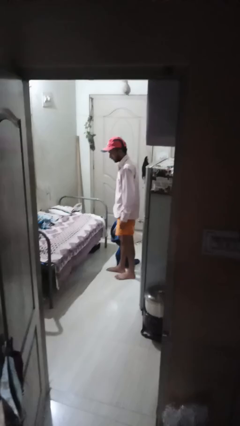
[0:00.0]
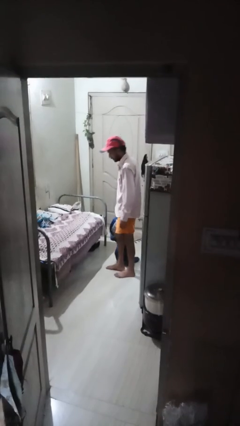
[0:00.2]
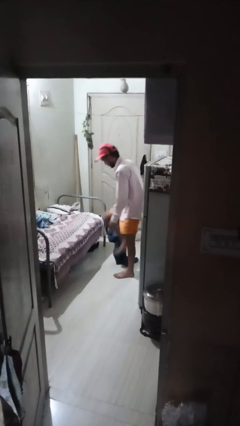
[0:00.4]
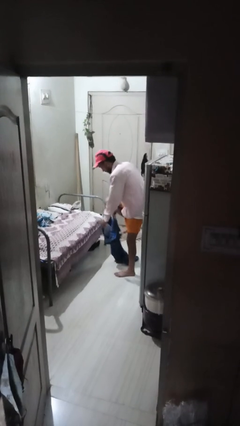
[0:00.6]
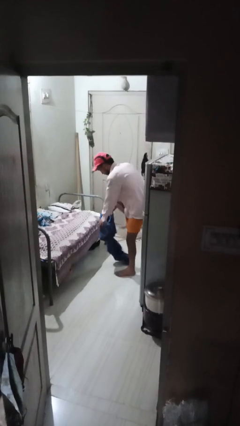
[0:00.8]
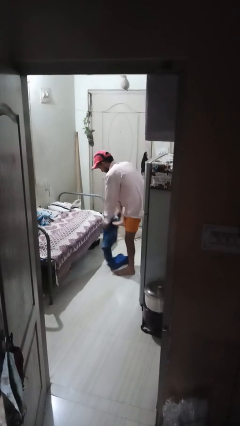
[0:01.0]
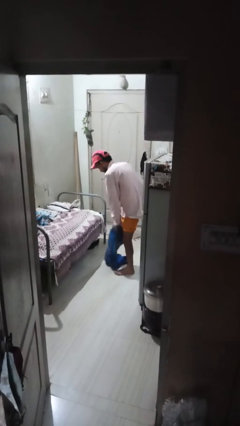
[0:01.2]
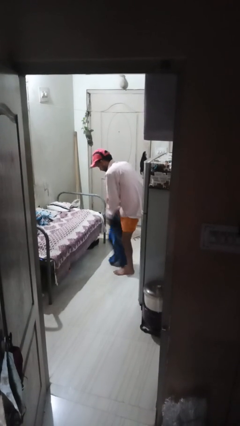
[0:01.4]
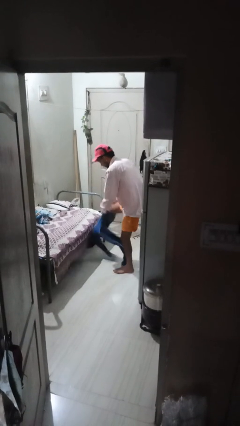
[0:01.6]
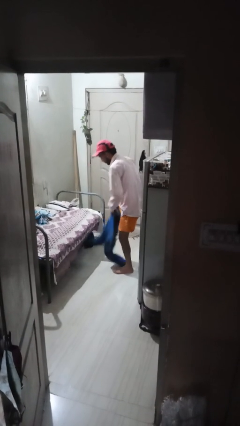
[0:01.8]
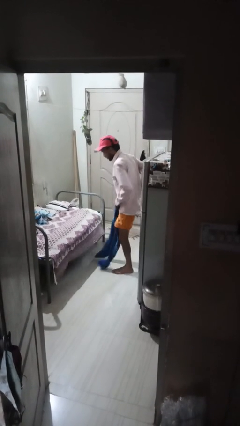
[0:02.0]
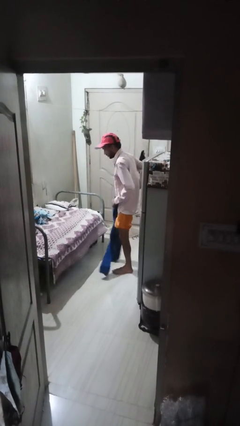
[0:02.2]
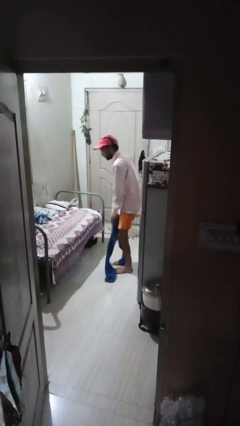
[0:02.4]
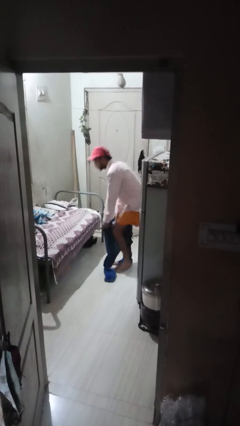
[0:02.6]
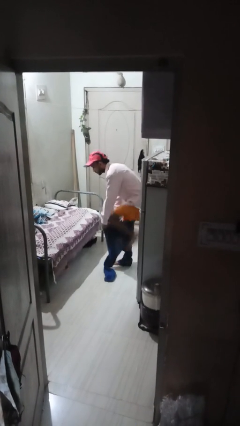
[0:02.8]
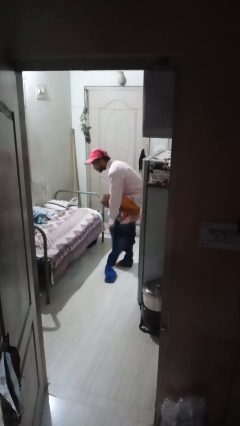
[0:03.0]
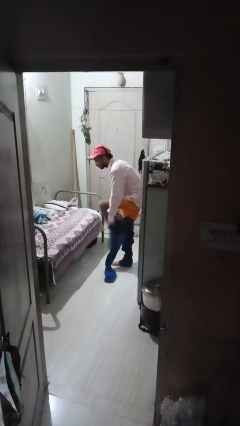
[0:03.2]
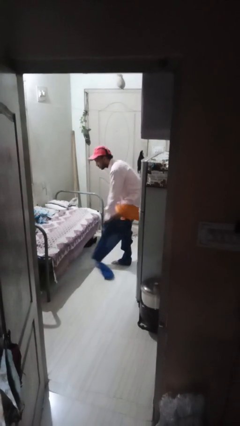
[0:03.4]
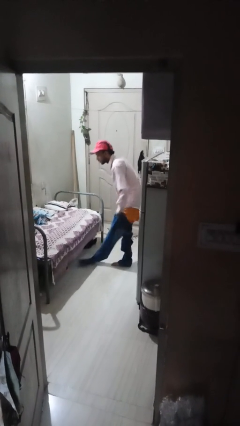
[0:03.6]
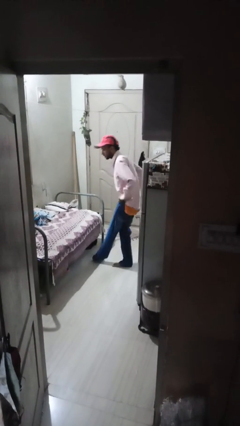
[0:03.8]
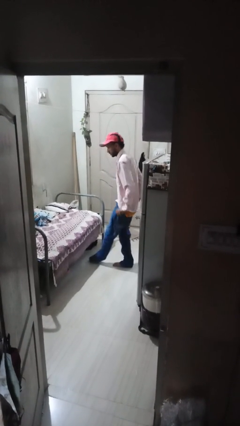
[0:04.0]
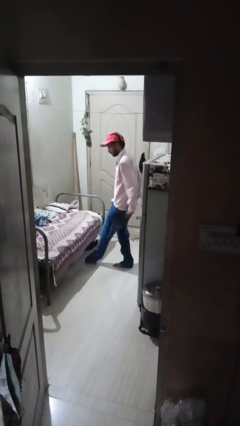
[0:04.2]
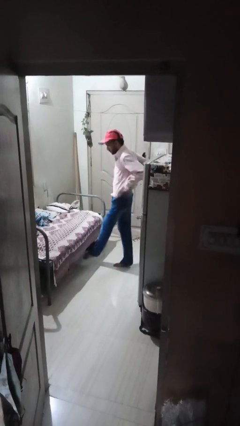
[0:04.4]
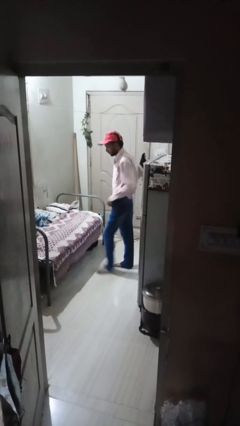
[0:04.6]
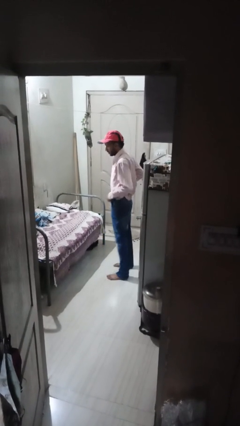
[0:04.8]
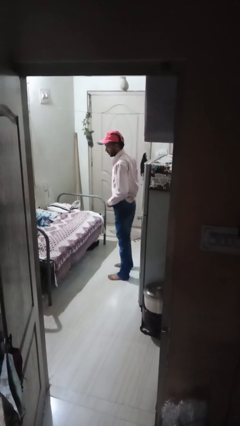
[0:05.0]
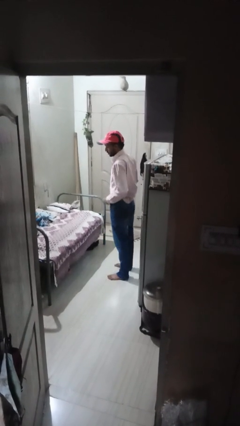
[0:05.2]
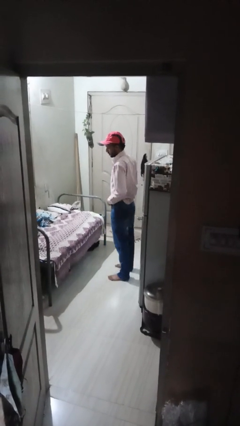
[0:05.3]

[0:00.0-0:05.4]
person puts on pants

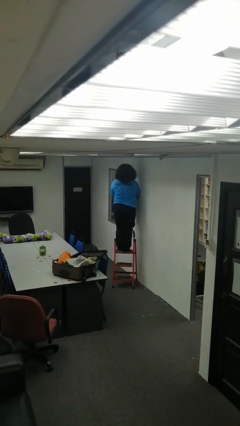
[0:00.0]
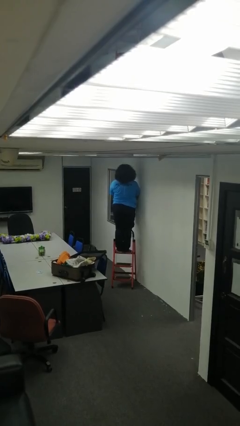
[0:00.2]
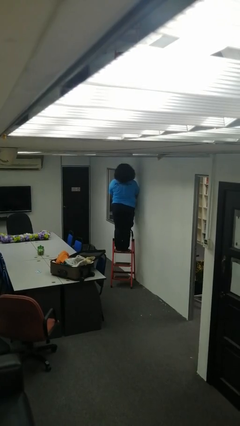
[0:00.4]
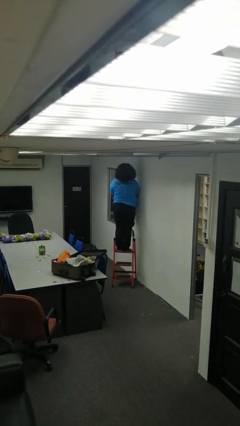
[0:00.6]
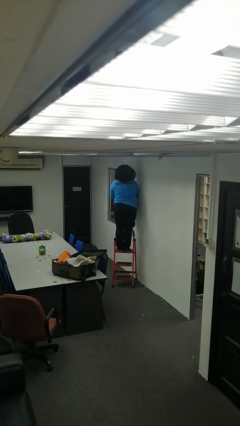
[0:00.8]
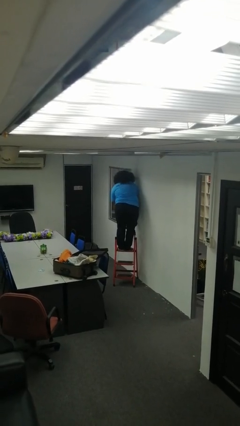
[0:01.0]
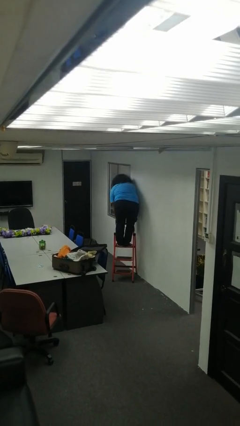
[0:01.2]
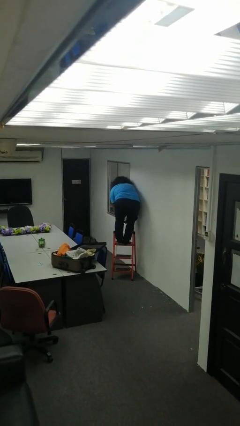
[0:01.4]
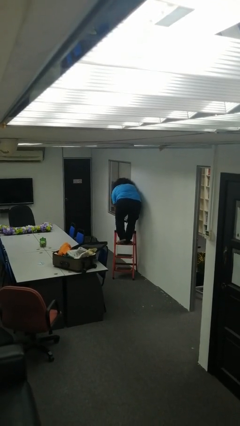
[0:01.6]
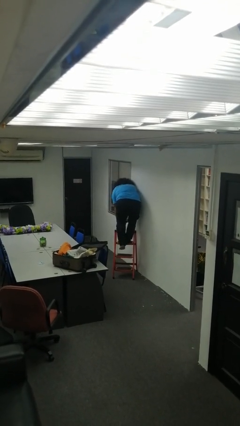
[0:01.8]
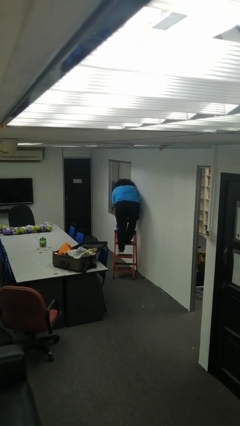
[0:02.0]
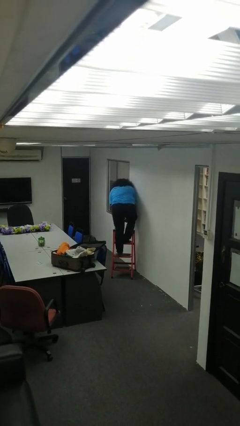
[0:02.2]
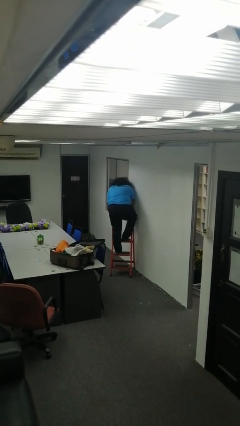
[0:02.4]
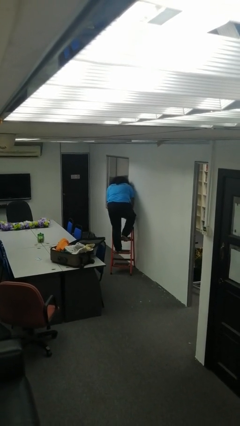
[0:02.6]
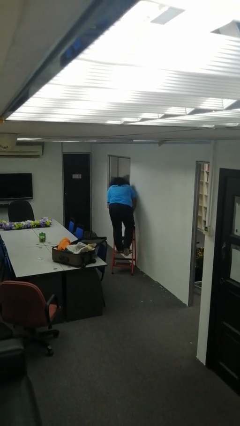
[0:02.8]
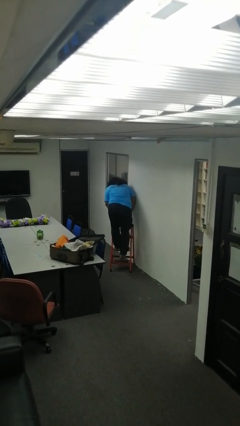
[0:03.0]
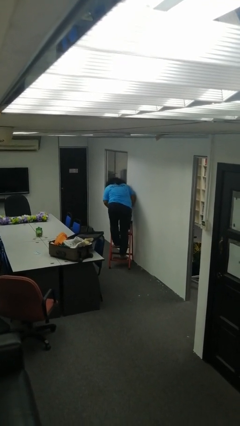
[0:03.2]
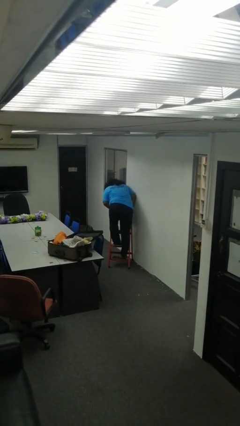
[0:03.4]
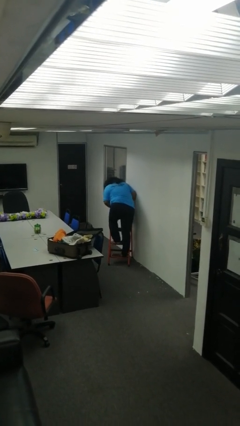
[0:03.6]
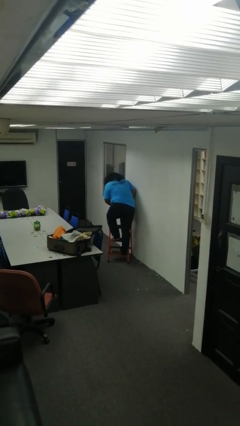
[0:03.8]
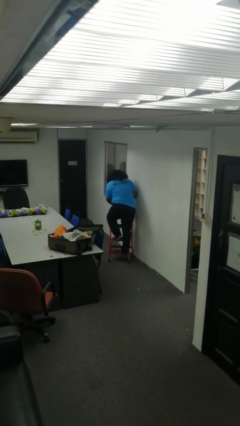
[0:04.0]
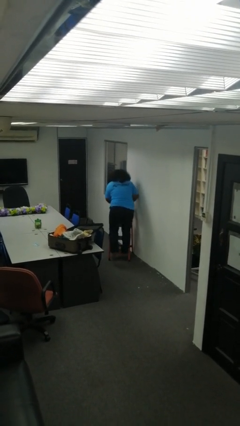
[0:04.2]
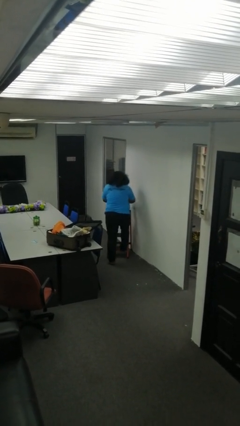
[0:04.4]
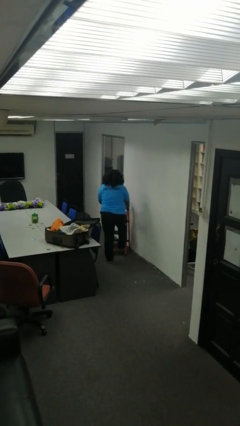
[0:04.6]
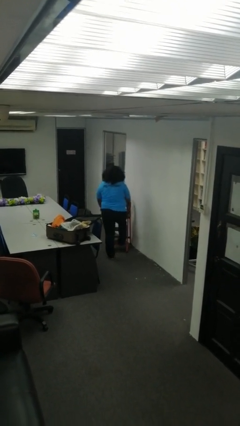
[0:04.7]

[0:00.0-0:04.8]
person climbs down ladder

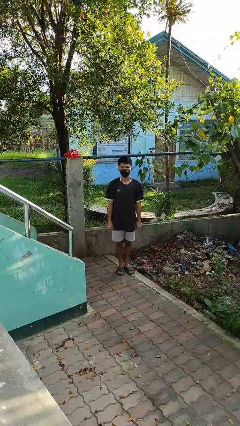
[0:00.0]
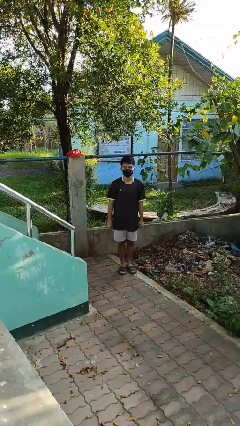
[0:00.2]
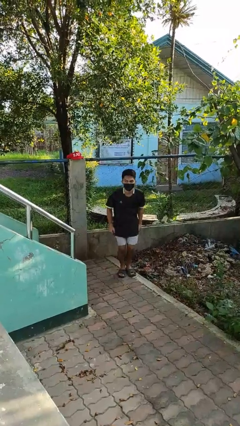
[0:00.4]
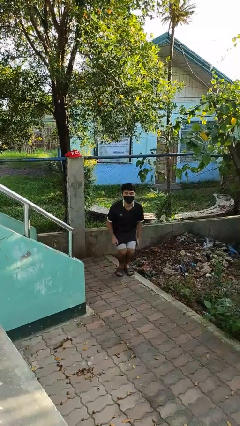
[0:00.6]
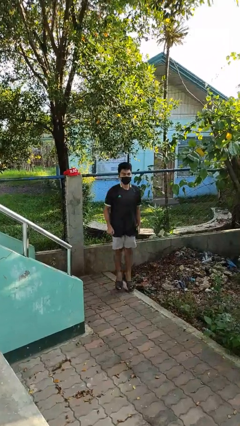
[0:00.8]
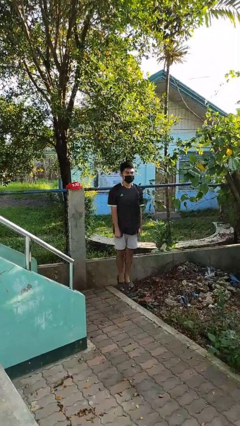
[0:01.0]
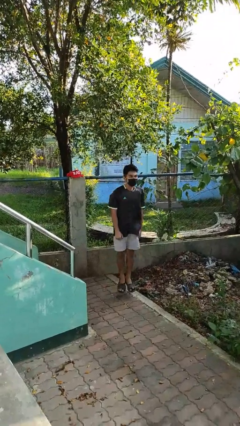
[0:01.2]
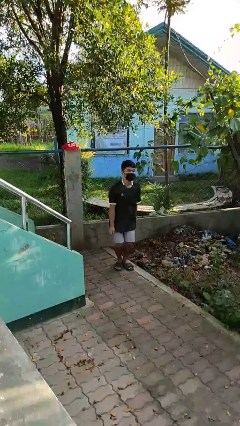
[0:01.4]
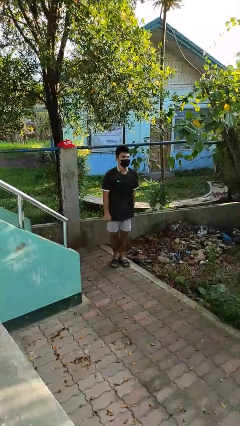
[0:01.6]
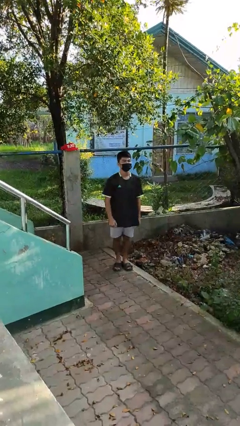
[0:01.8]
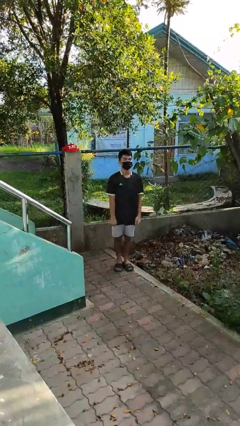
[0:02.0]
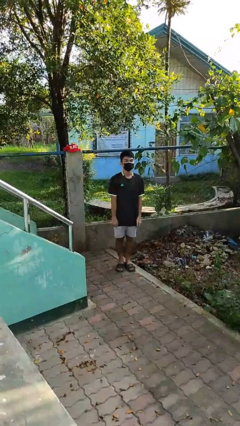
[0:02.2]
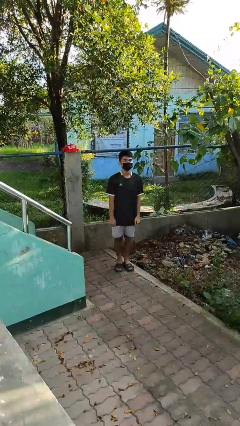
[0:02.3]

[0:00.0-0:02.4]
person jumps

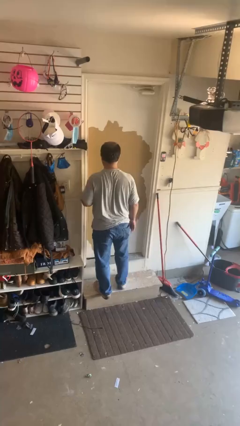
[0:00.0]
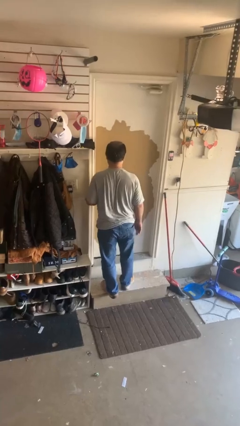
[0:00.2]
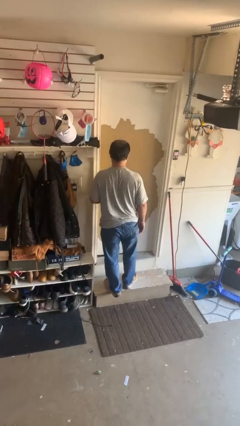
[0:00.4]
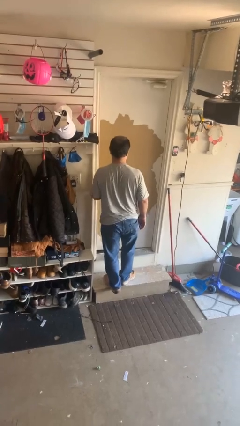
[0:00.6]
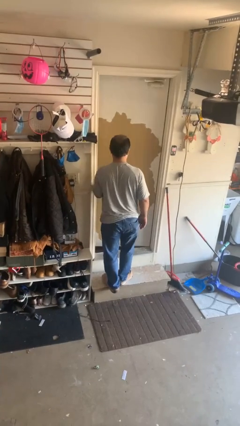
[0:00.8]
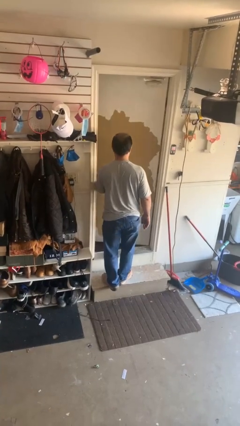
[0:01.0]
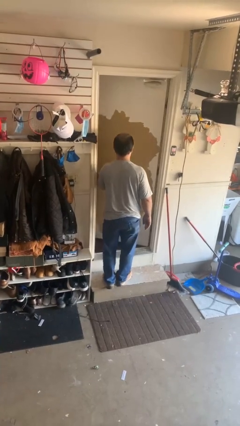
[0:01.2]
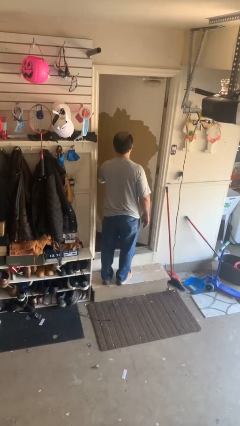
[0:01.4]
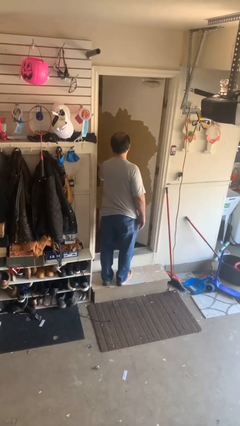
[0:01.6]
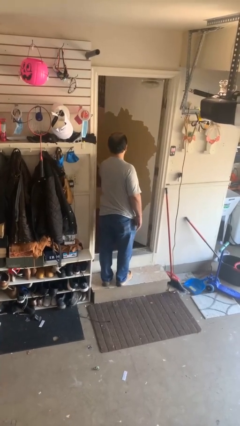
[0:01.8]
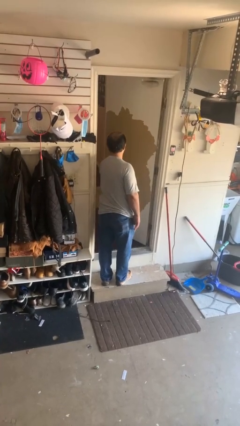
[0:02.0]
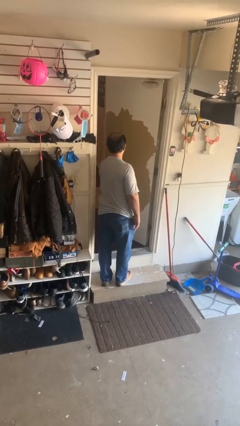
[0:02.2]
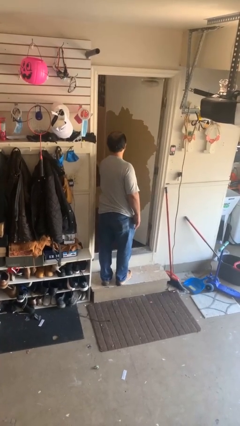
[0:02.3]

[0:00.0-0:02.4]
person opens facility door

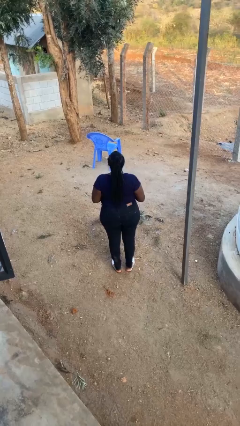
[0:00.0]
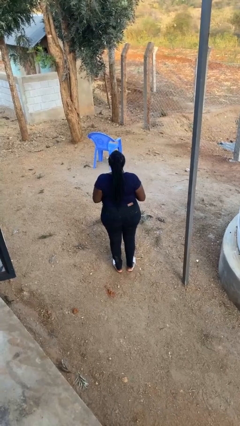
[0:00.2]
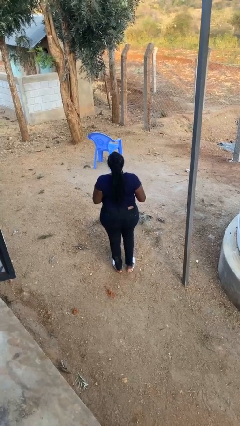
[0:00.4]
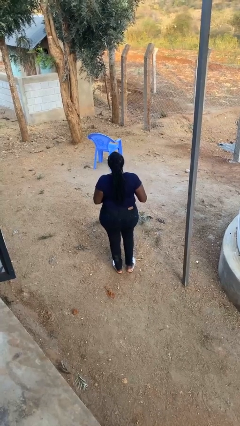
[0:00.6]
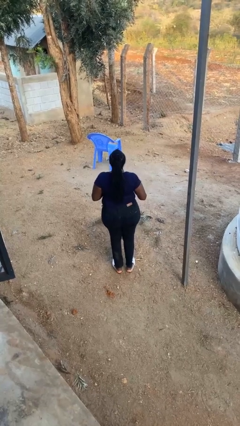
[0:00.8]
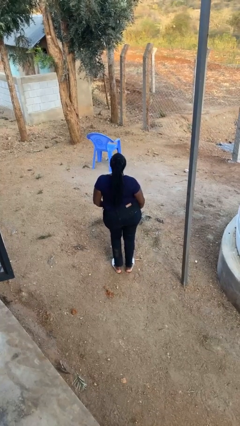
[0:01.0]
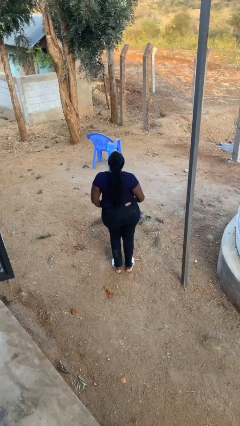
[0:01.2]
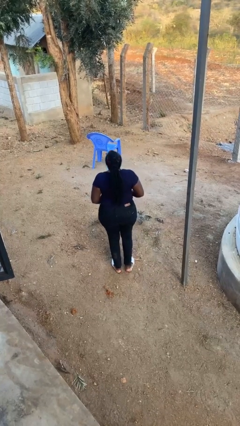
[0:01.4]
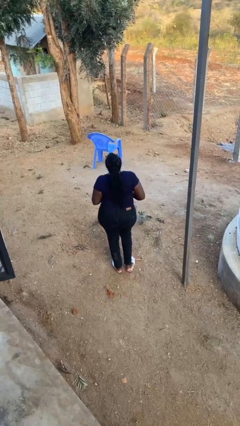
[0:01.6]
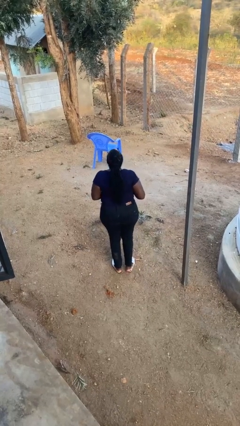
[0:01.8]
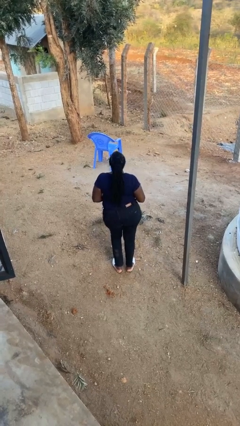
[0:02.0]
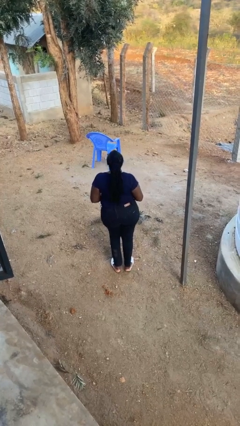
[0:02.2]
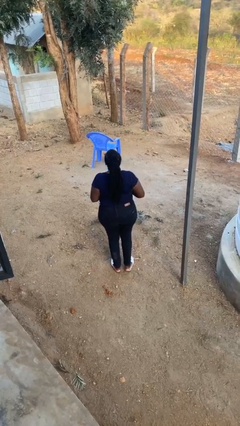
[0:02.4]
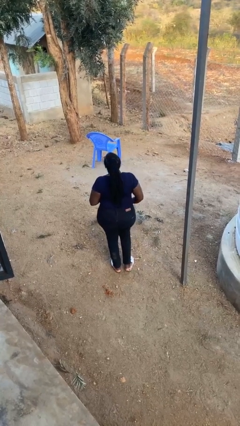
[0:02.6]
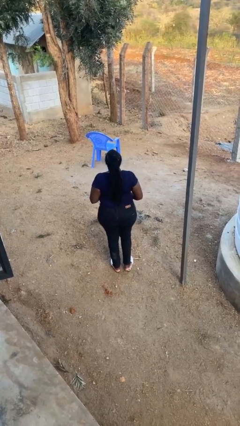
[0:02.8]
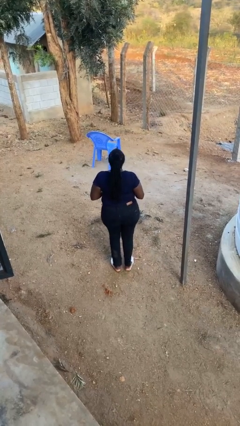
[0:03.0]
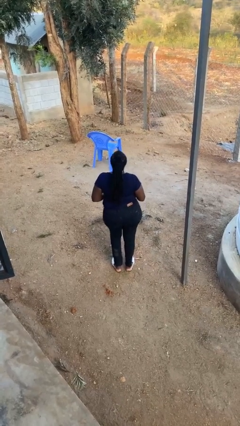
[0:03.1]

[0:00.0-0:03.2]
person wiggles hips
